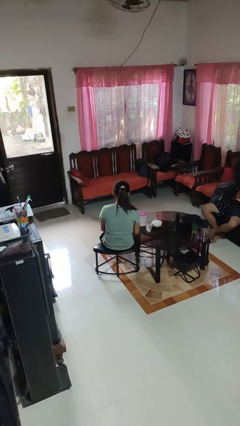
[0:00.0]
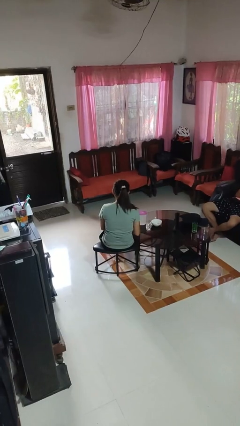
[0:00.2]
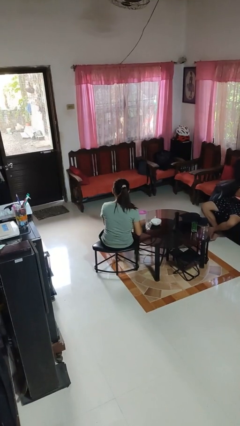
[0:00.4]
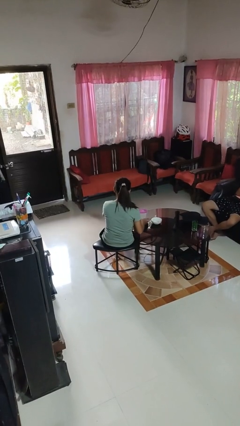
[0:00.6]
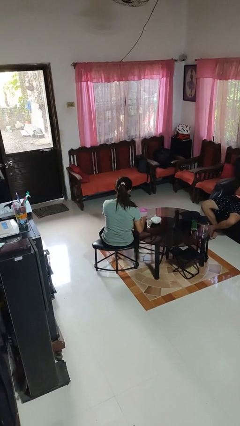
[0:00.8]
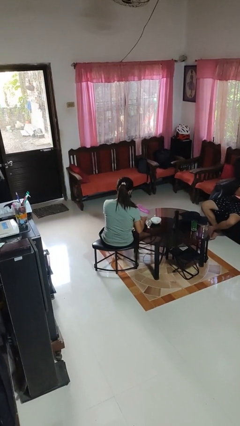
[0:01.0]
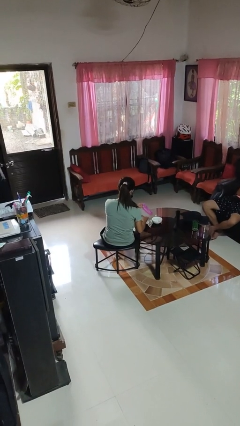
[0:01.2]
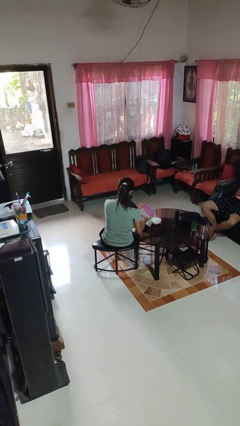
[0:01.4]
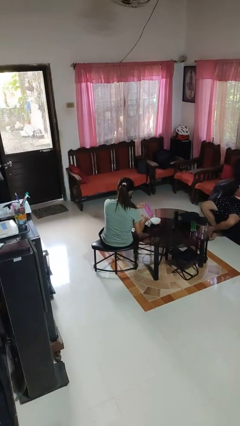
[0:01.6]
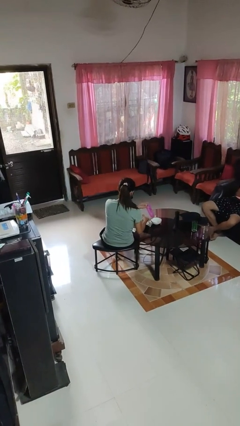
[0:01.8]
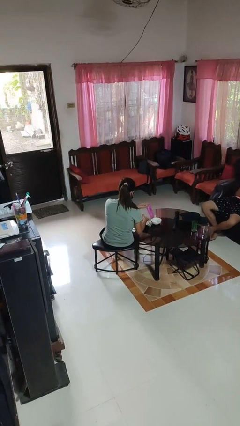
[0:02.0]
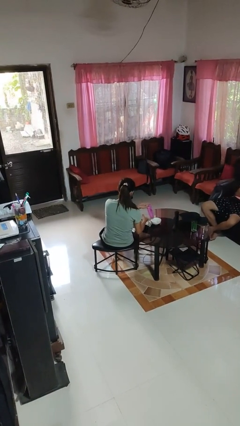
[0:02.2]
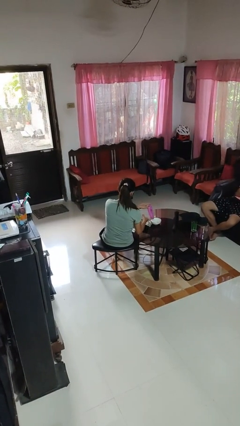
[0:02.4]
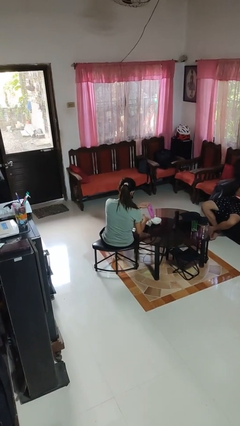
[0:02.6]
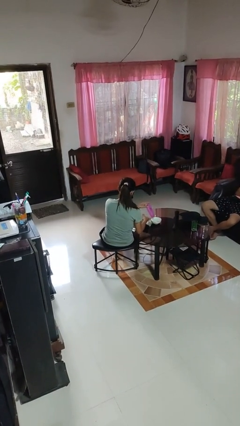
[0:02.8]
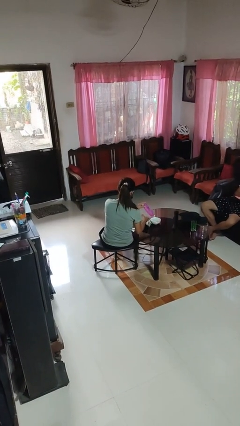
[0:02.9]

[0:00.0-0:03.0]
person pours into bowl

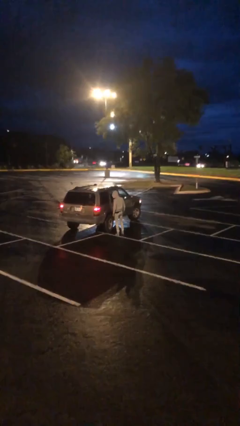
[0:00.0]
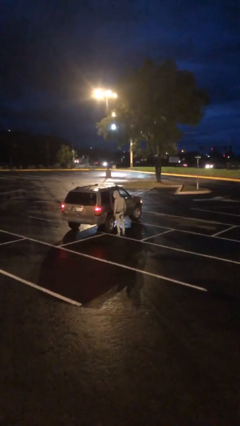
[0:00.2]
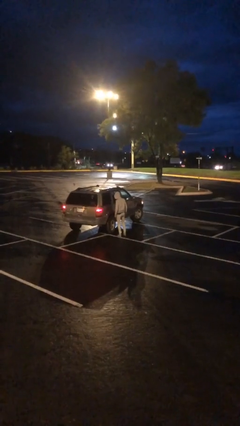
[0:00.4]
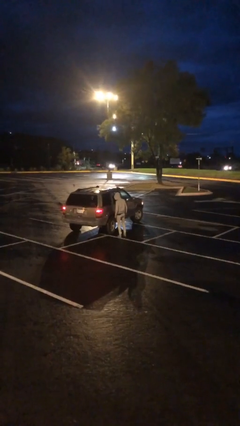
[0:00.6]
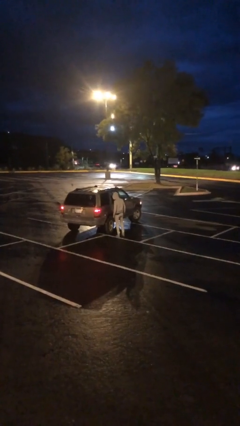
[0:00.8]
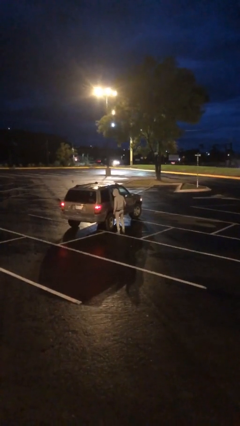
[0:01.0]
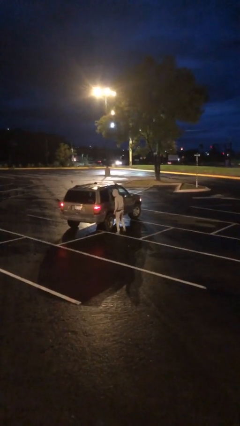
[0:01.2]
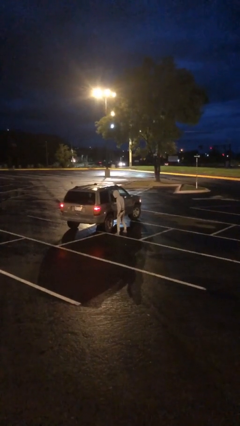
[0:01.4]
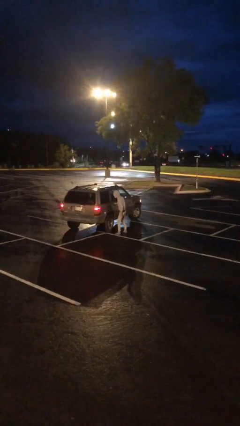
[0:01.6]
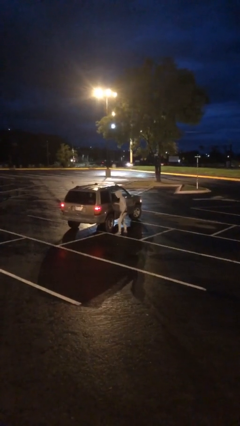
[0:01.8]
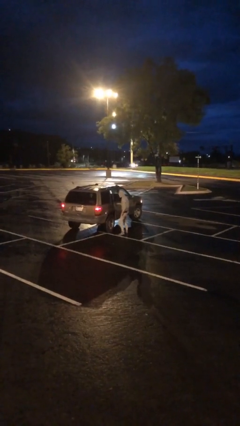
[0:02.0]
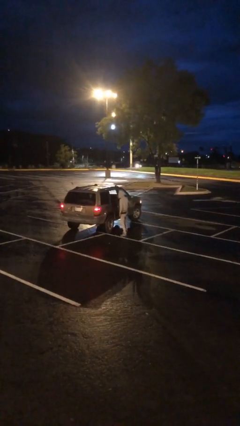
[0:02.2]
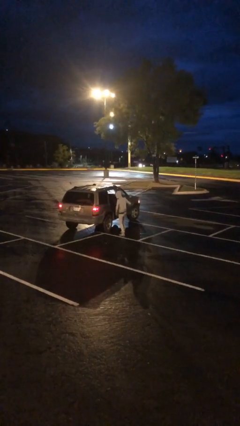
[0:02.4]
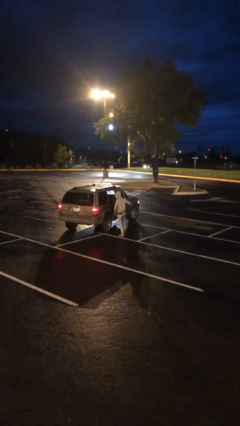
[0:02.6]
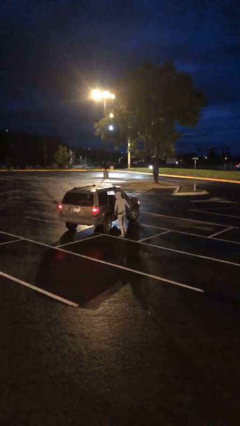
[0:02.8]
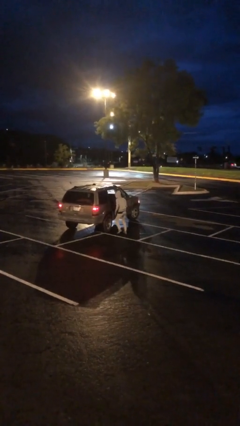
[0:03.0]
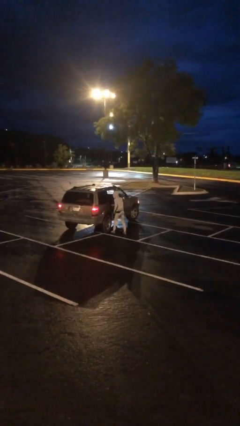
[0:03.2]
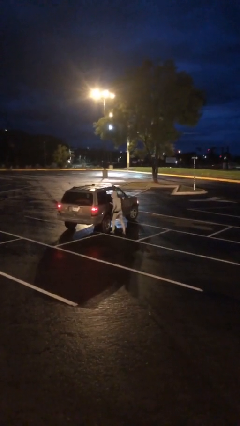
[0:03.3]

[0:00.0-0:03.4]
person opens car door

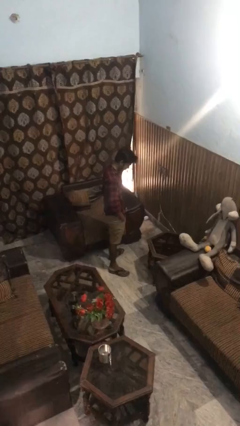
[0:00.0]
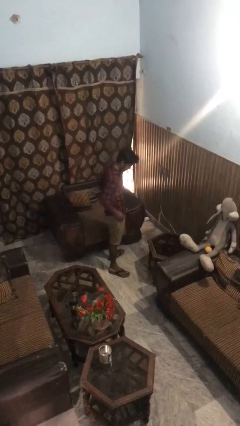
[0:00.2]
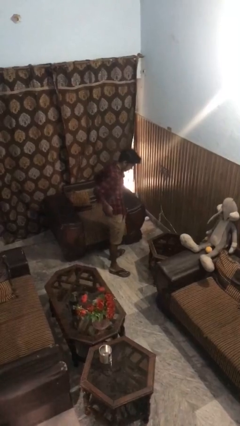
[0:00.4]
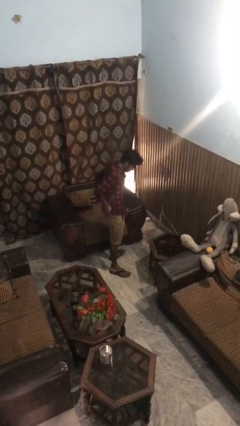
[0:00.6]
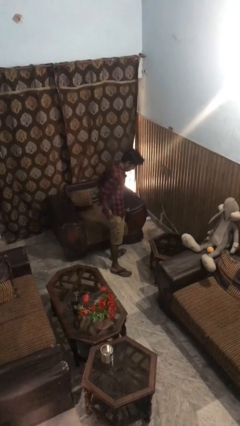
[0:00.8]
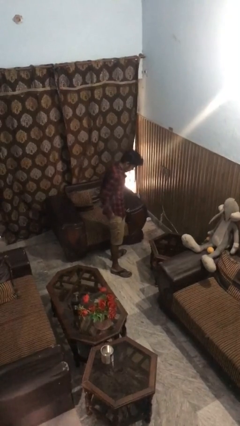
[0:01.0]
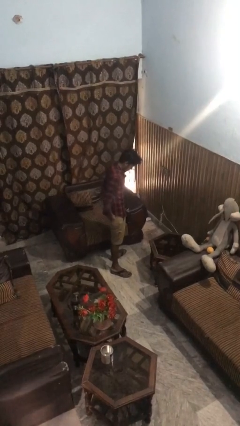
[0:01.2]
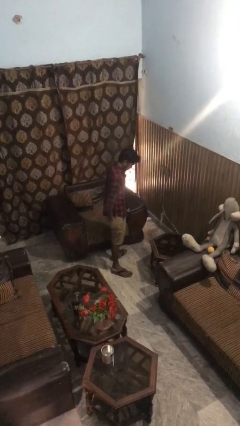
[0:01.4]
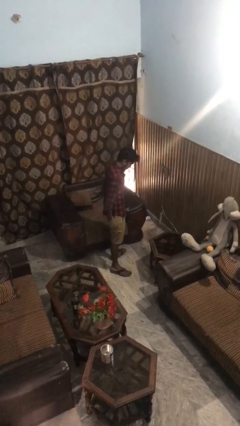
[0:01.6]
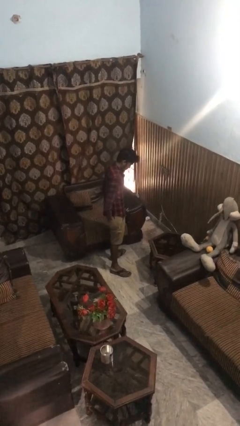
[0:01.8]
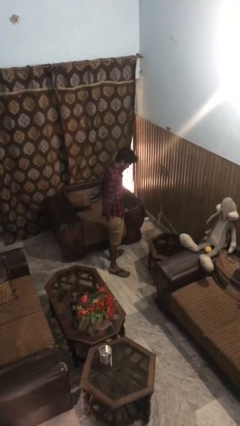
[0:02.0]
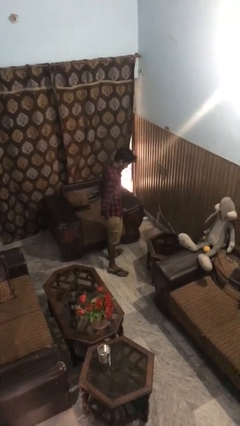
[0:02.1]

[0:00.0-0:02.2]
person puts hands in back pockets

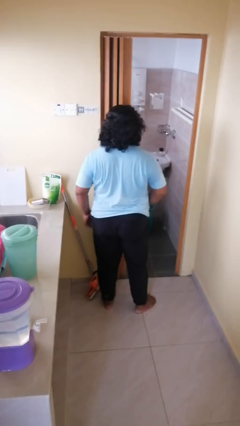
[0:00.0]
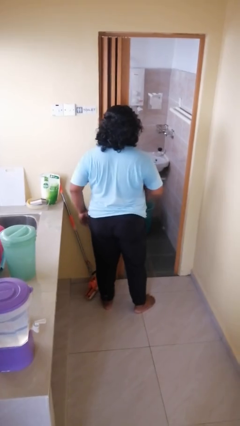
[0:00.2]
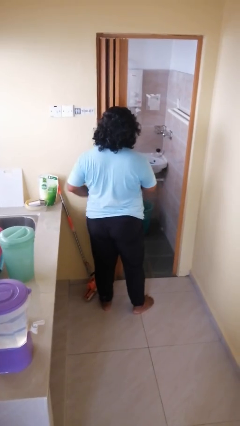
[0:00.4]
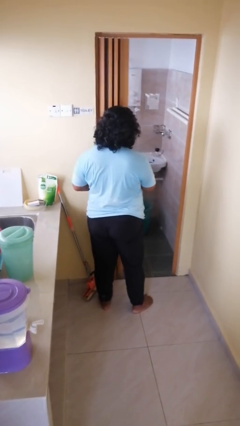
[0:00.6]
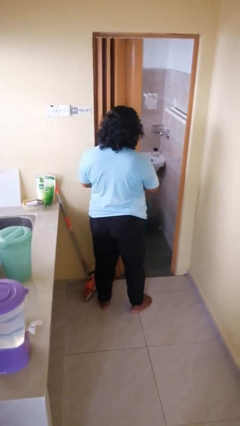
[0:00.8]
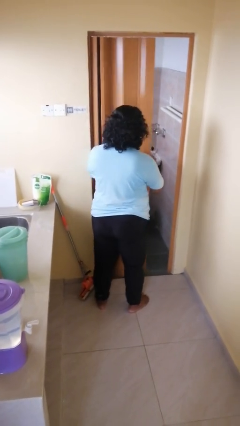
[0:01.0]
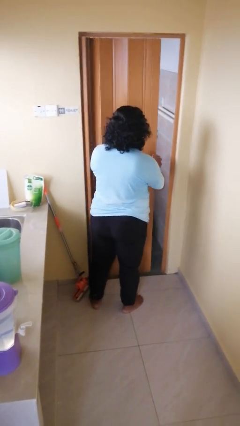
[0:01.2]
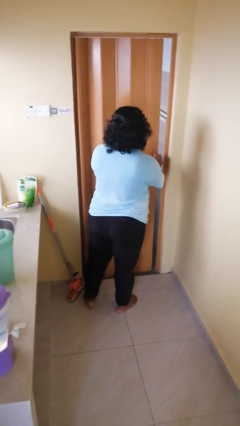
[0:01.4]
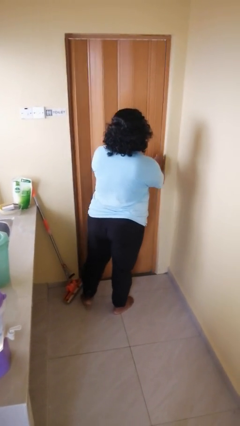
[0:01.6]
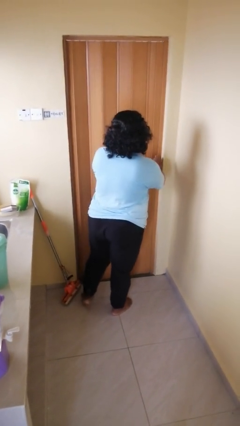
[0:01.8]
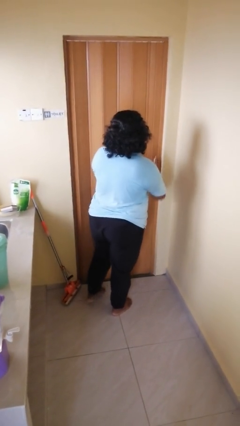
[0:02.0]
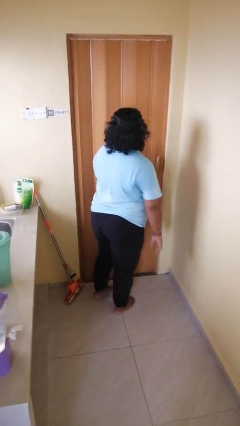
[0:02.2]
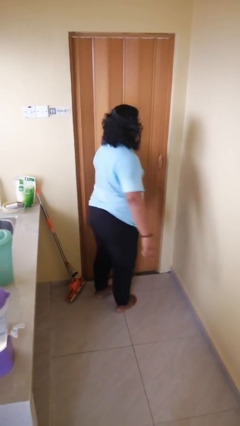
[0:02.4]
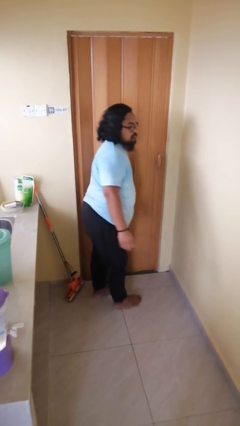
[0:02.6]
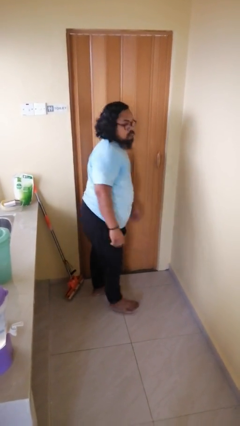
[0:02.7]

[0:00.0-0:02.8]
person closes sliding door

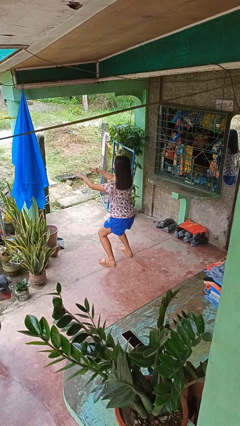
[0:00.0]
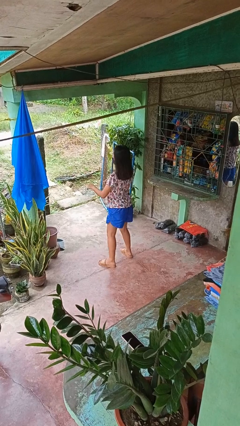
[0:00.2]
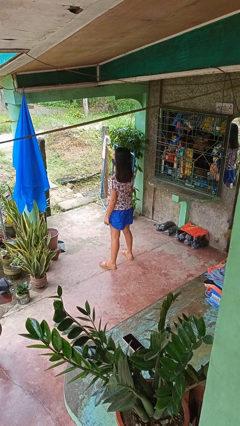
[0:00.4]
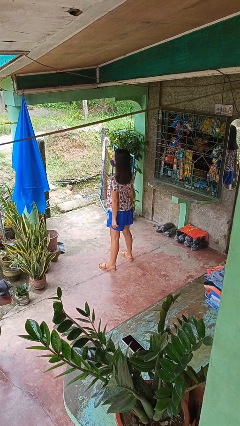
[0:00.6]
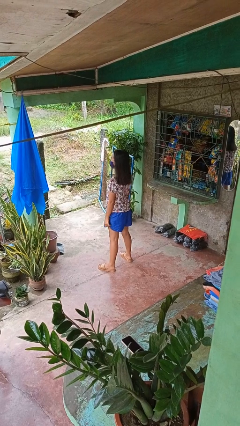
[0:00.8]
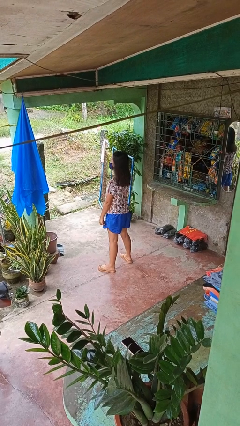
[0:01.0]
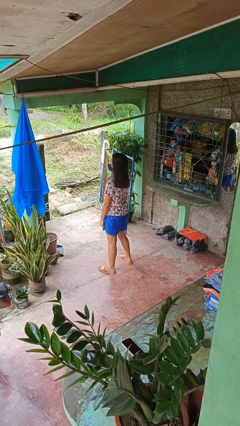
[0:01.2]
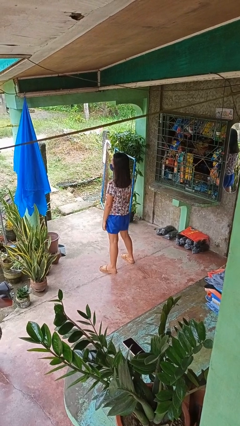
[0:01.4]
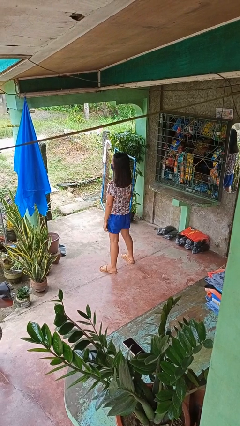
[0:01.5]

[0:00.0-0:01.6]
person stands up

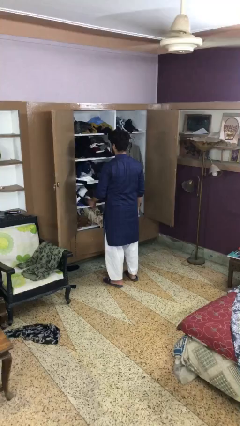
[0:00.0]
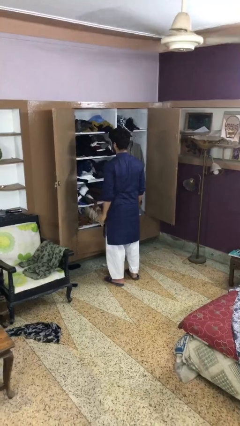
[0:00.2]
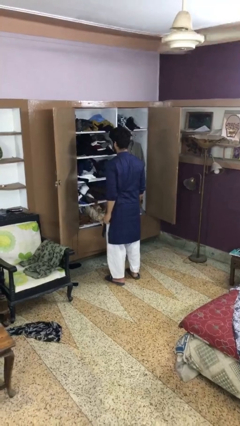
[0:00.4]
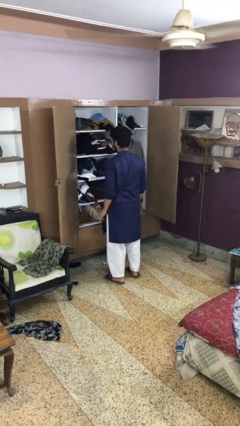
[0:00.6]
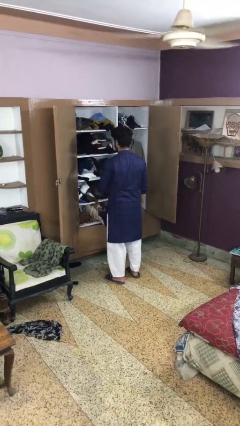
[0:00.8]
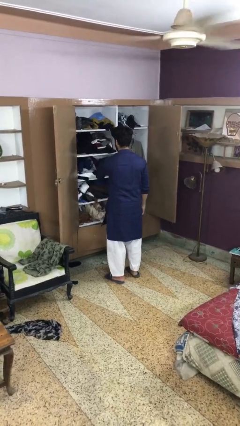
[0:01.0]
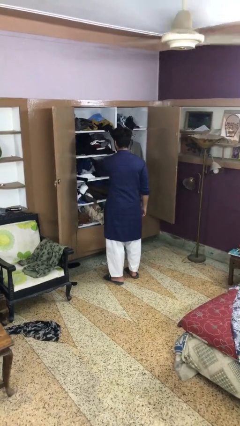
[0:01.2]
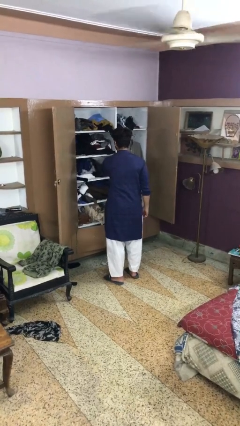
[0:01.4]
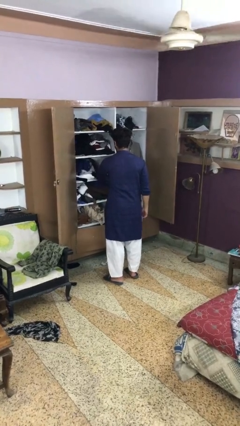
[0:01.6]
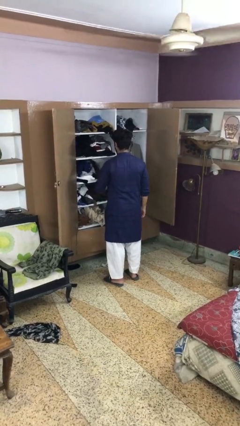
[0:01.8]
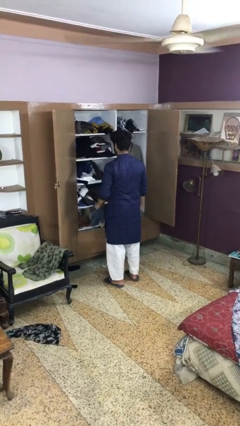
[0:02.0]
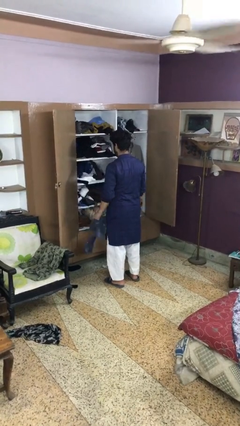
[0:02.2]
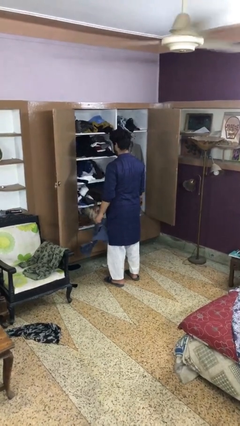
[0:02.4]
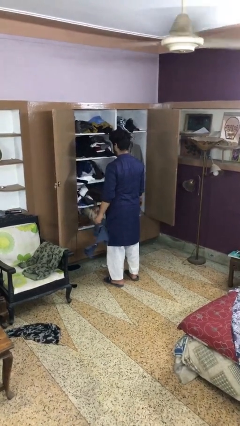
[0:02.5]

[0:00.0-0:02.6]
person takes clothes from dresser

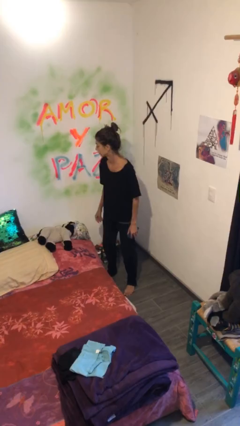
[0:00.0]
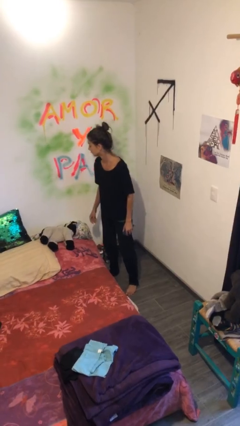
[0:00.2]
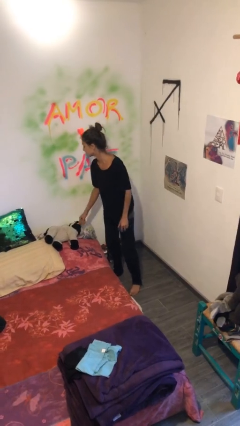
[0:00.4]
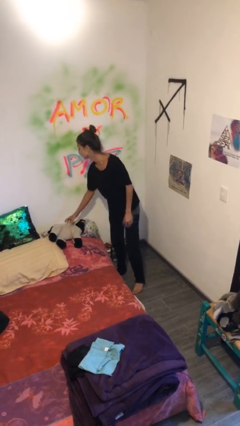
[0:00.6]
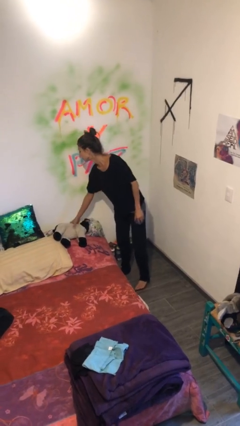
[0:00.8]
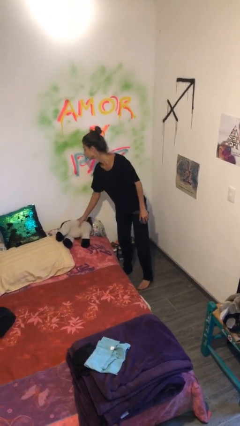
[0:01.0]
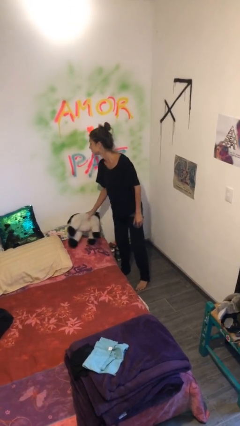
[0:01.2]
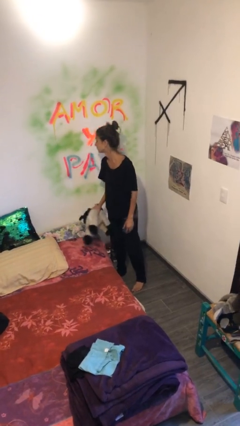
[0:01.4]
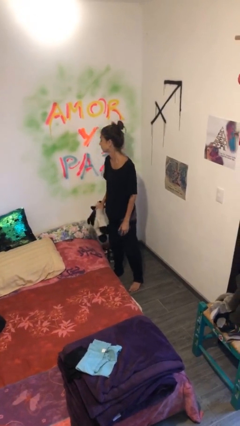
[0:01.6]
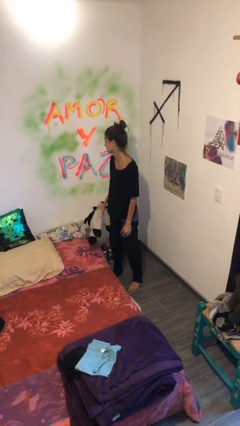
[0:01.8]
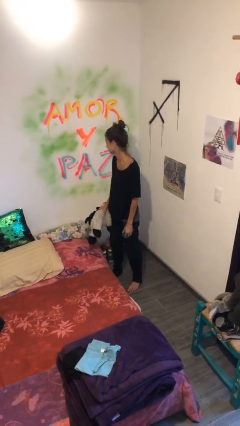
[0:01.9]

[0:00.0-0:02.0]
person picks up object from bed
